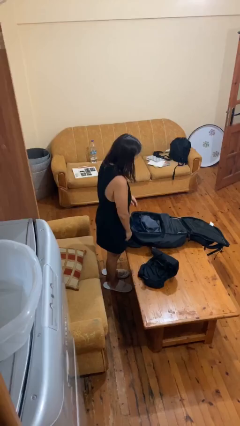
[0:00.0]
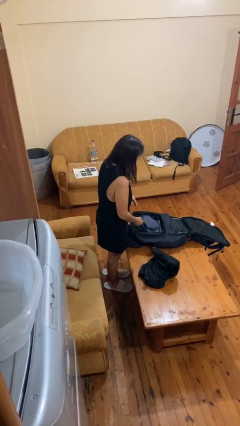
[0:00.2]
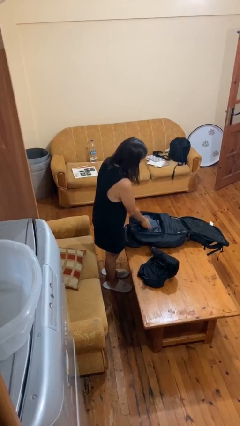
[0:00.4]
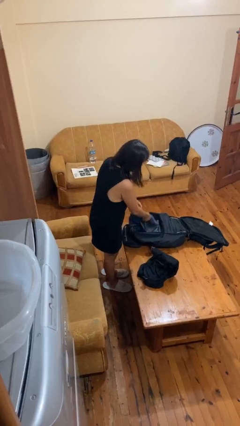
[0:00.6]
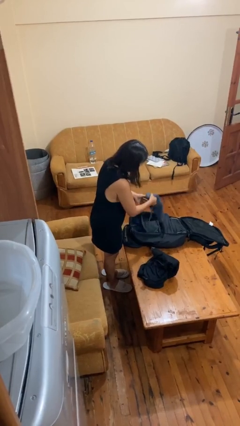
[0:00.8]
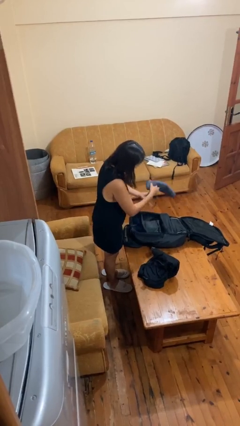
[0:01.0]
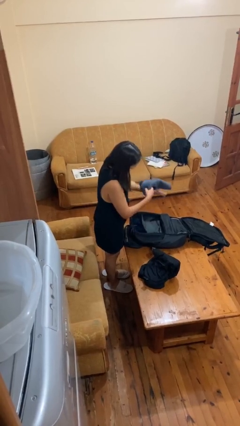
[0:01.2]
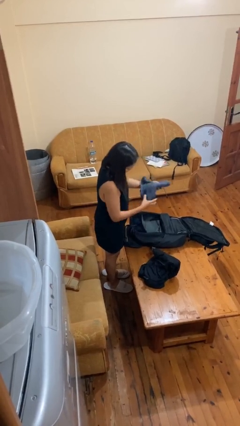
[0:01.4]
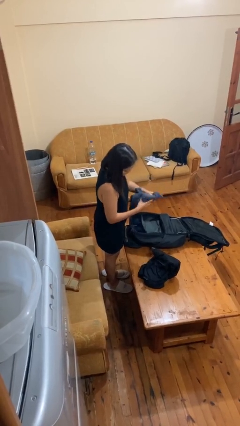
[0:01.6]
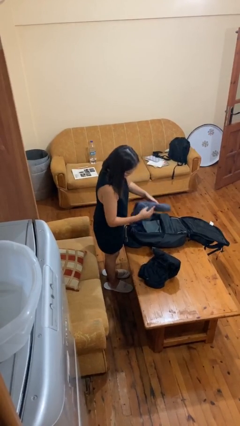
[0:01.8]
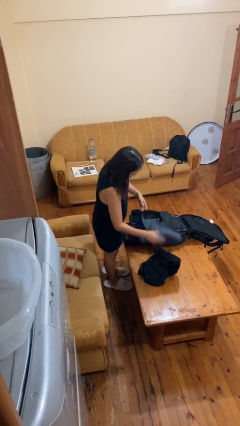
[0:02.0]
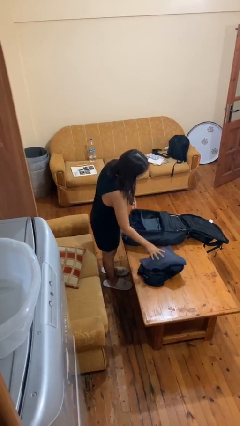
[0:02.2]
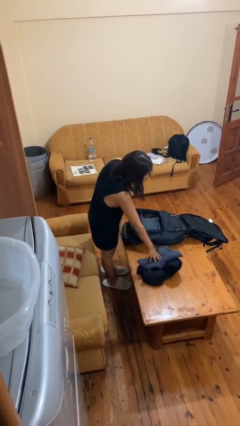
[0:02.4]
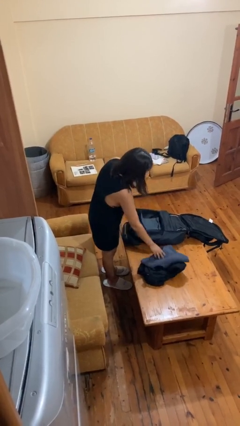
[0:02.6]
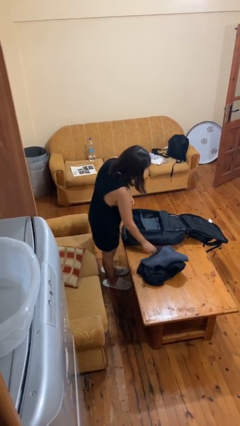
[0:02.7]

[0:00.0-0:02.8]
person unloads clothes from suitcase

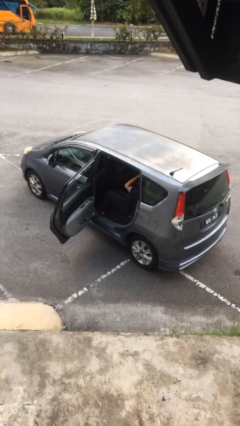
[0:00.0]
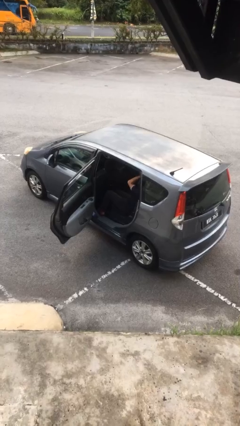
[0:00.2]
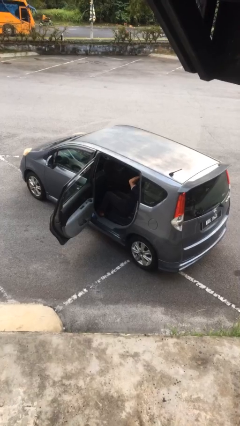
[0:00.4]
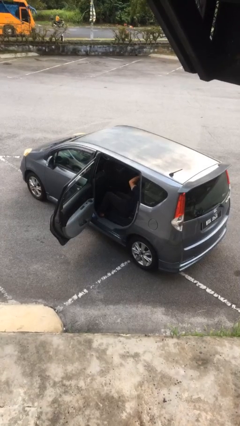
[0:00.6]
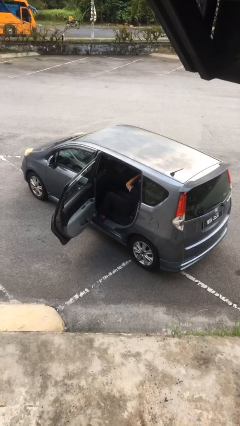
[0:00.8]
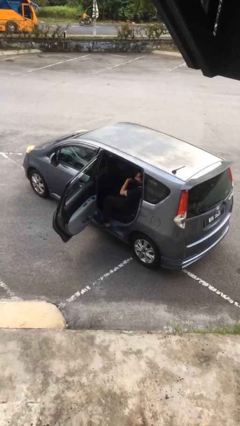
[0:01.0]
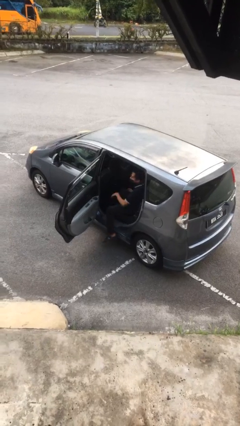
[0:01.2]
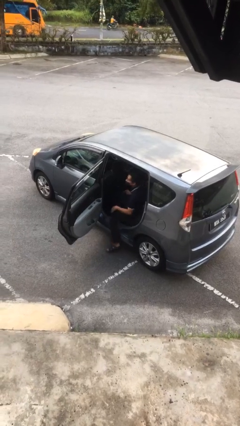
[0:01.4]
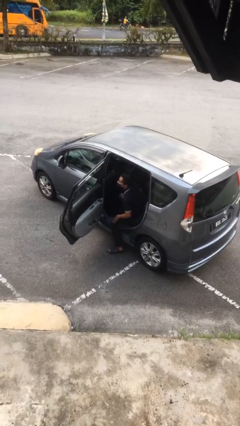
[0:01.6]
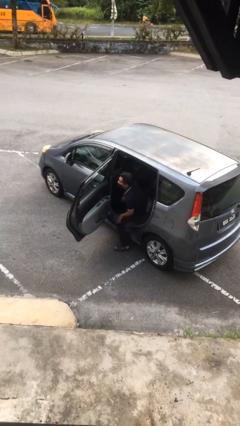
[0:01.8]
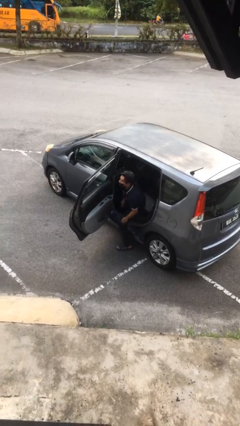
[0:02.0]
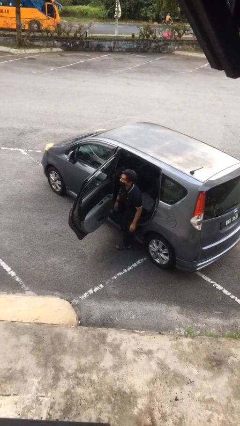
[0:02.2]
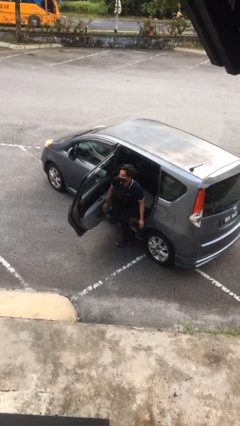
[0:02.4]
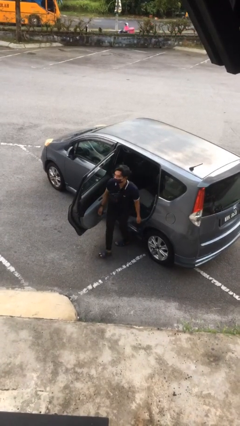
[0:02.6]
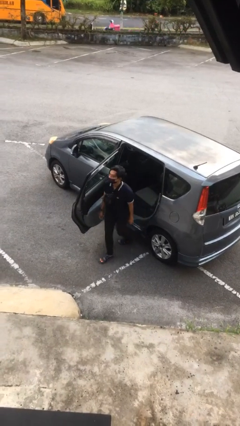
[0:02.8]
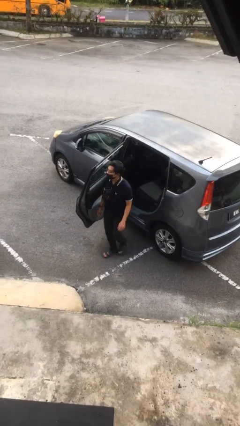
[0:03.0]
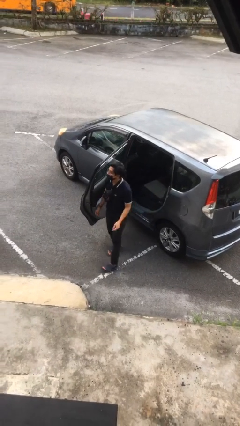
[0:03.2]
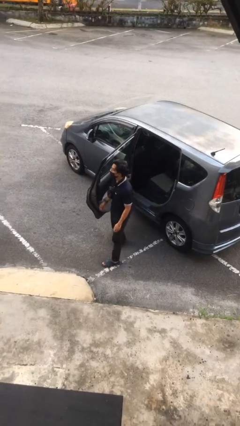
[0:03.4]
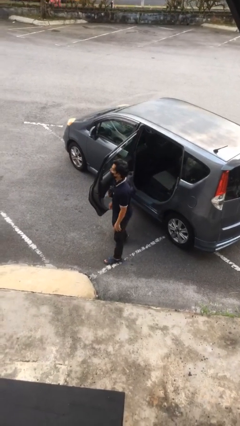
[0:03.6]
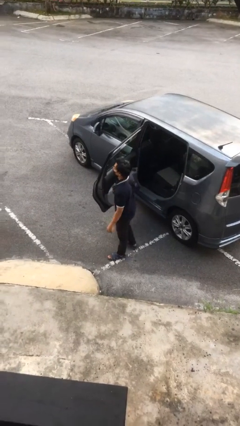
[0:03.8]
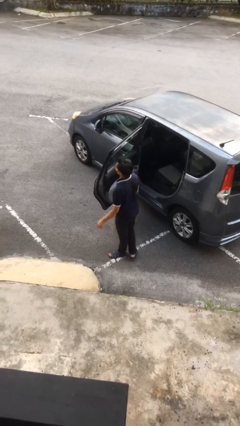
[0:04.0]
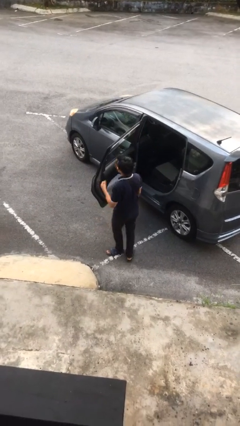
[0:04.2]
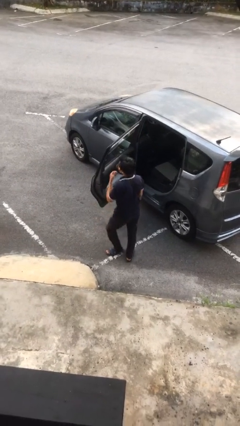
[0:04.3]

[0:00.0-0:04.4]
person exits car

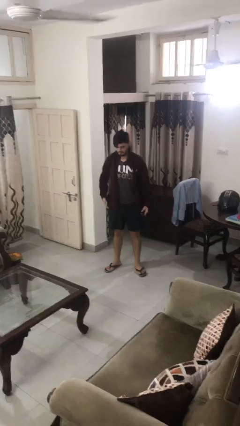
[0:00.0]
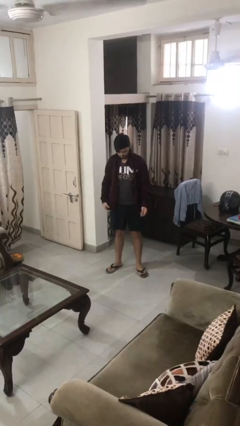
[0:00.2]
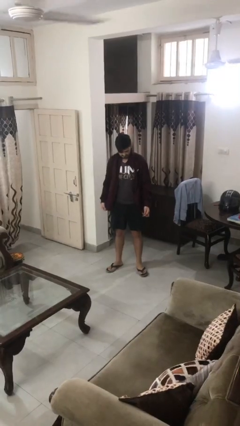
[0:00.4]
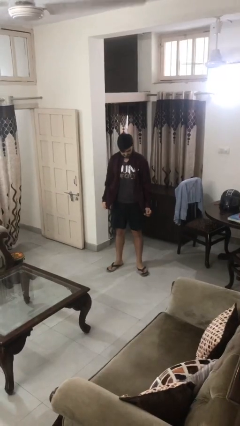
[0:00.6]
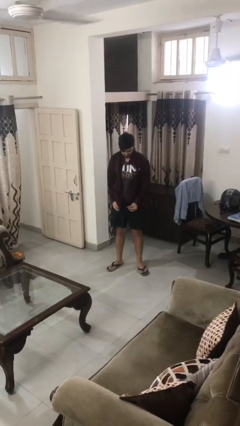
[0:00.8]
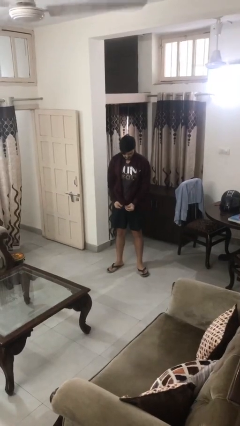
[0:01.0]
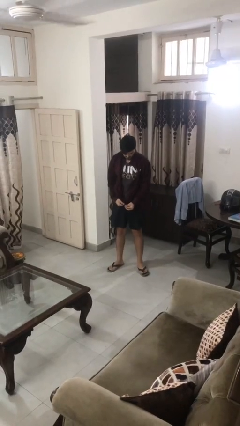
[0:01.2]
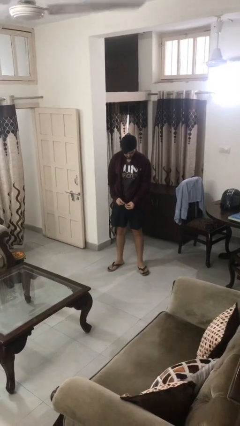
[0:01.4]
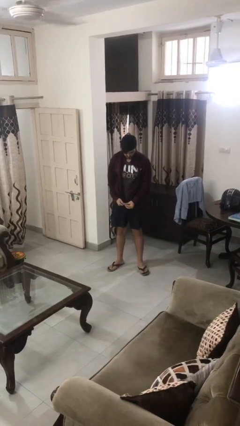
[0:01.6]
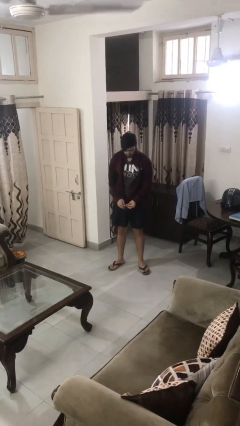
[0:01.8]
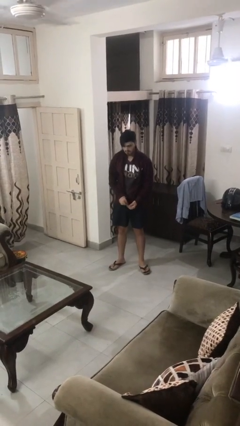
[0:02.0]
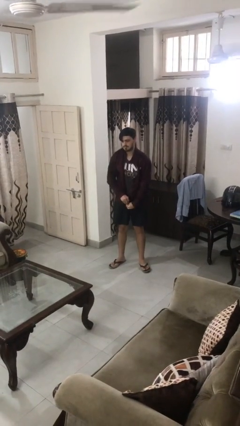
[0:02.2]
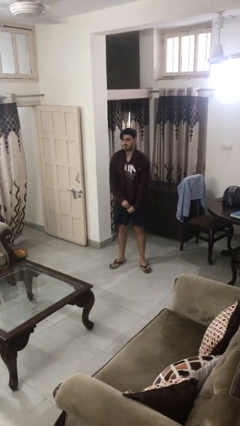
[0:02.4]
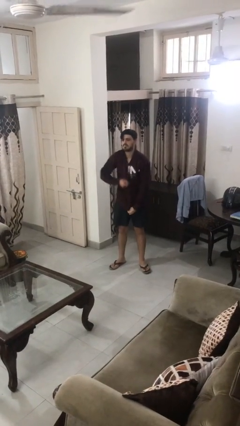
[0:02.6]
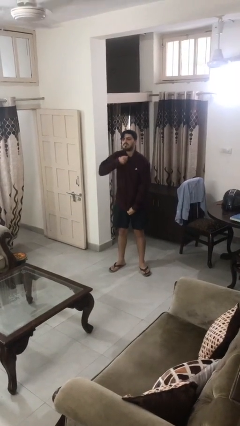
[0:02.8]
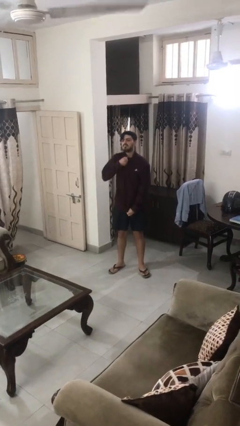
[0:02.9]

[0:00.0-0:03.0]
person zips up jacket

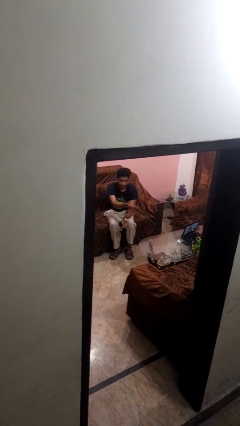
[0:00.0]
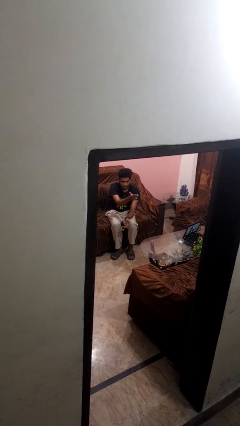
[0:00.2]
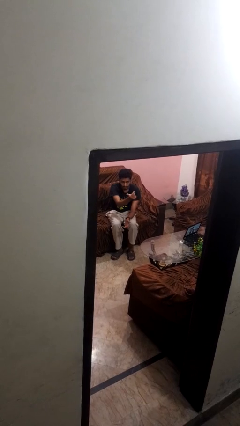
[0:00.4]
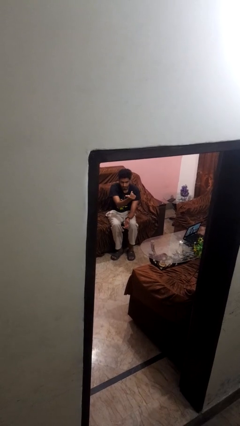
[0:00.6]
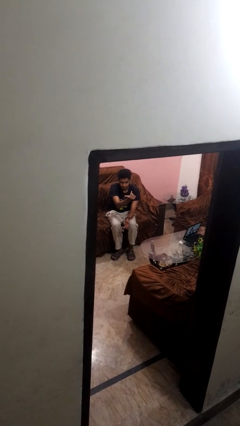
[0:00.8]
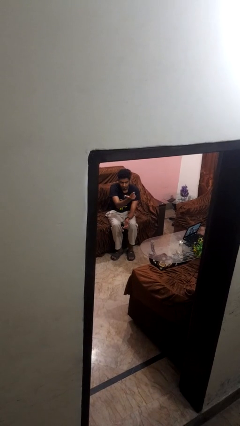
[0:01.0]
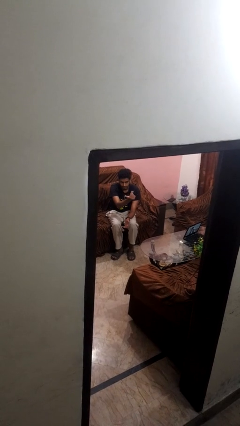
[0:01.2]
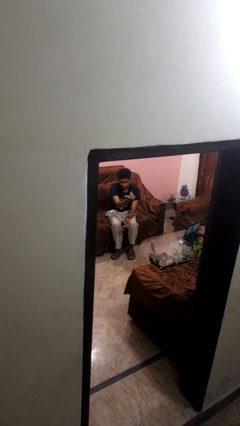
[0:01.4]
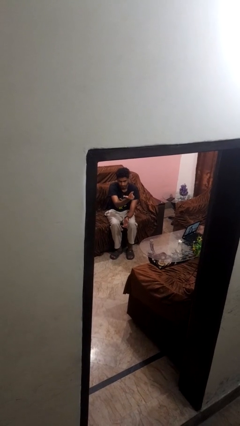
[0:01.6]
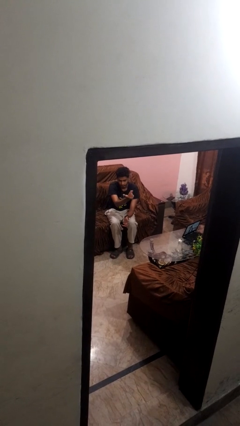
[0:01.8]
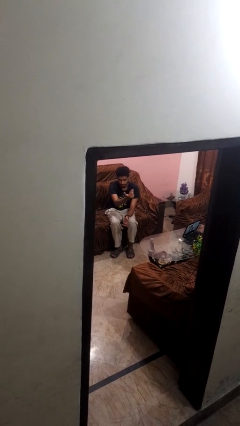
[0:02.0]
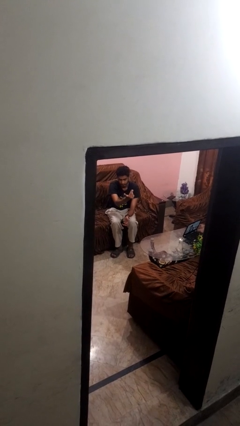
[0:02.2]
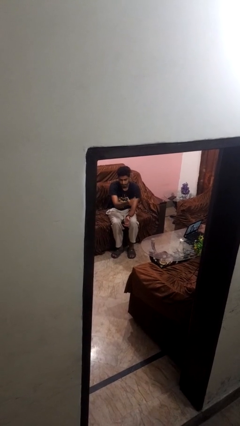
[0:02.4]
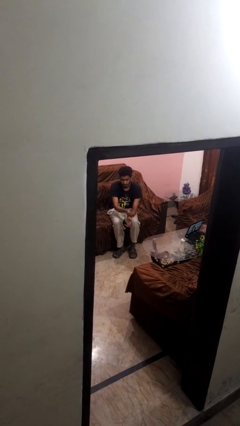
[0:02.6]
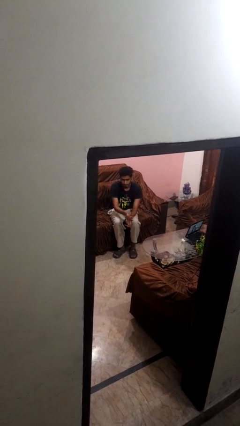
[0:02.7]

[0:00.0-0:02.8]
person gestures come here

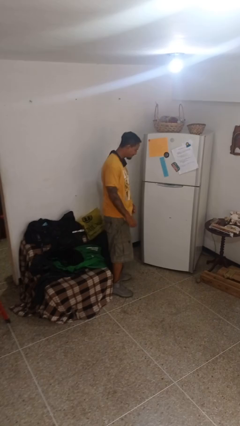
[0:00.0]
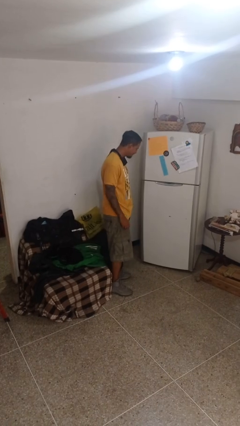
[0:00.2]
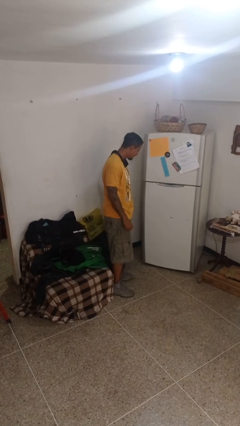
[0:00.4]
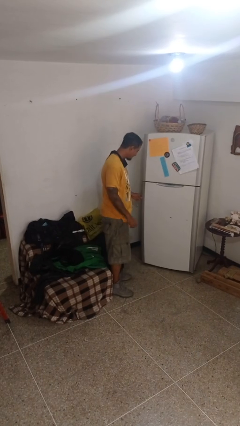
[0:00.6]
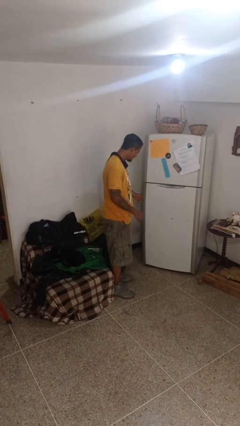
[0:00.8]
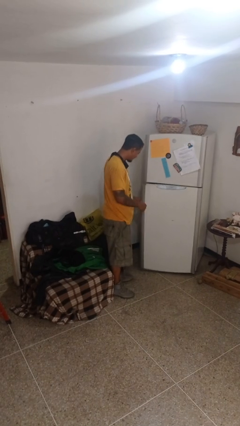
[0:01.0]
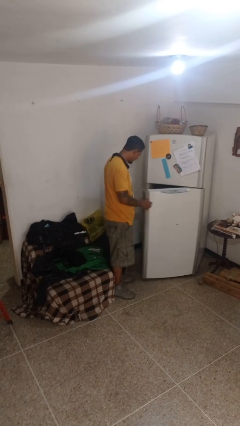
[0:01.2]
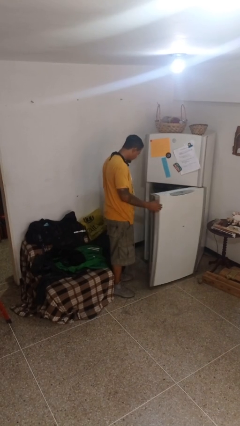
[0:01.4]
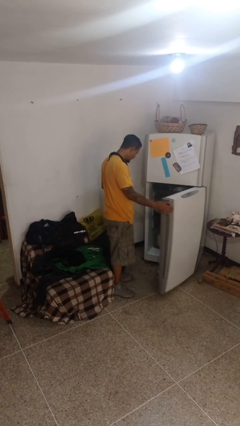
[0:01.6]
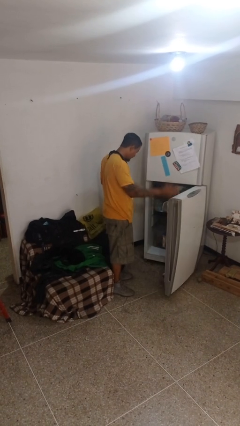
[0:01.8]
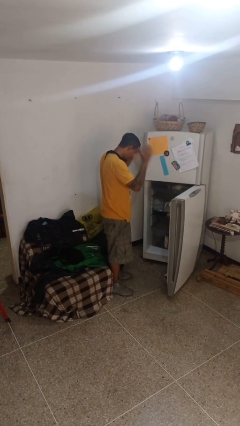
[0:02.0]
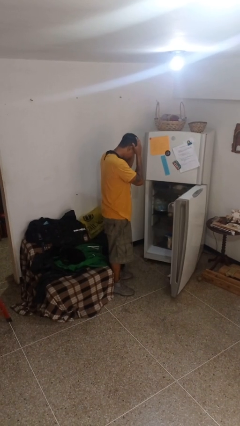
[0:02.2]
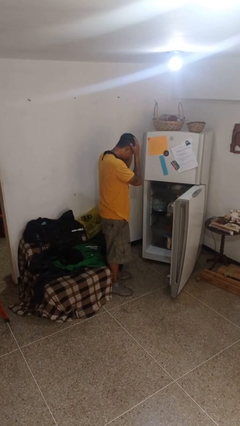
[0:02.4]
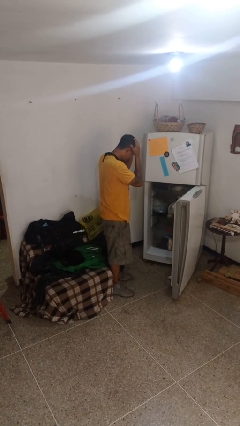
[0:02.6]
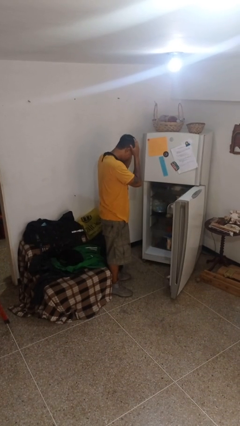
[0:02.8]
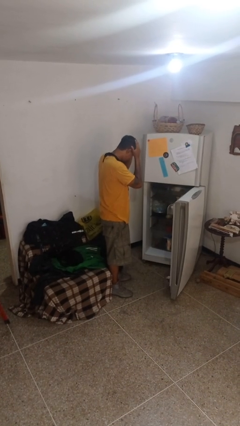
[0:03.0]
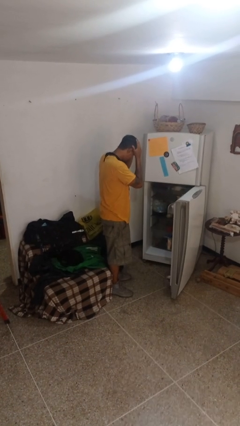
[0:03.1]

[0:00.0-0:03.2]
person opens refrigerator

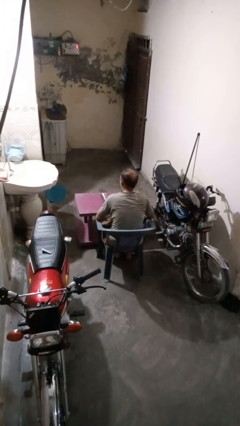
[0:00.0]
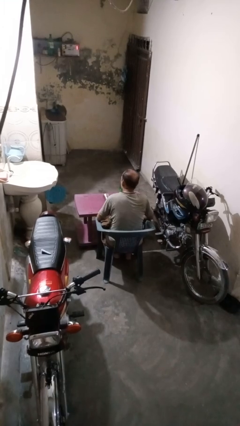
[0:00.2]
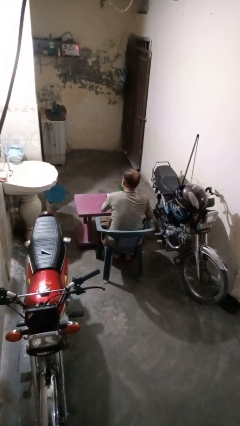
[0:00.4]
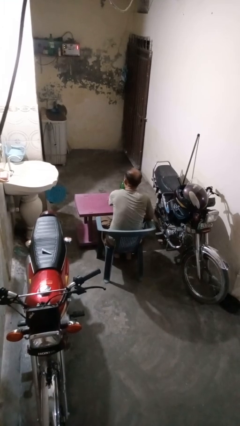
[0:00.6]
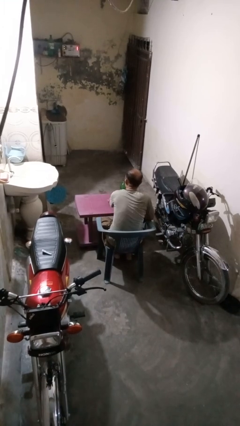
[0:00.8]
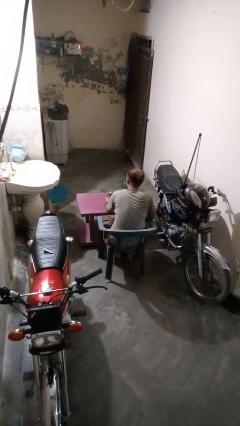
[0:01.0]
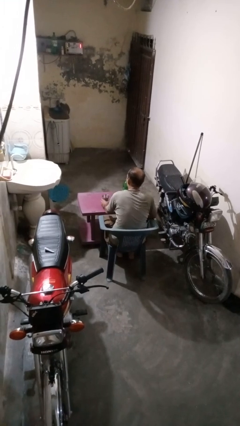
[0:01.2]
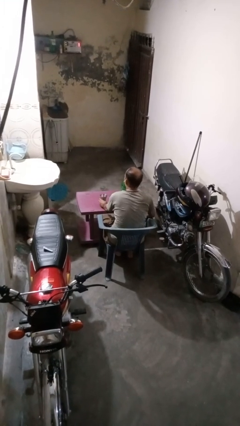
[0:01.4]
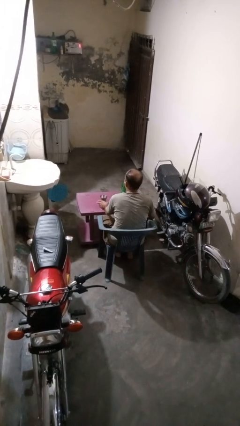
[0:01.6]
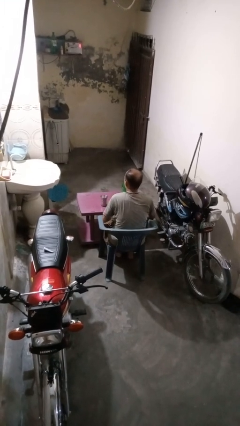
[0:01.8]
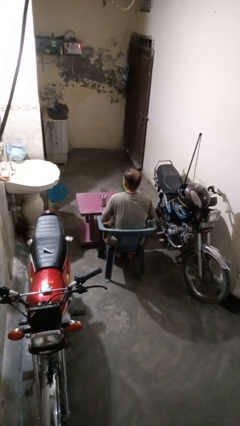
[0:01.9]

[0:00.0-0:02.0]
person sets upright glass
